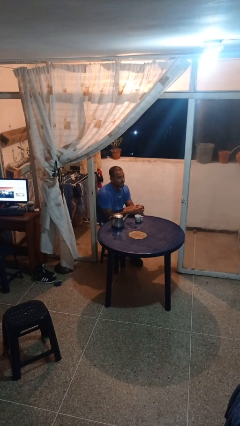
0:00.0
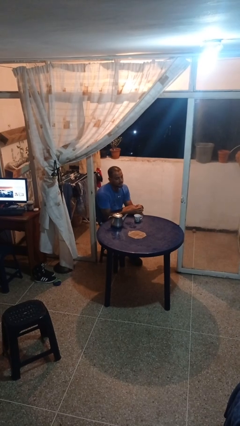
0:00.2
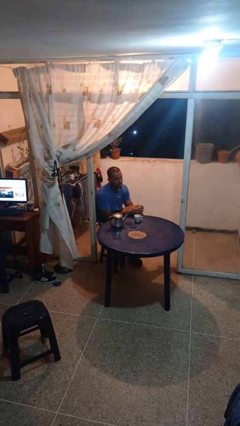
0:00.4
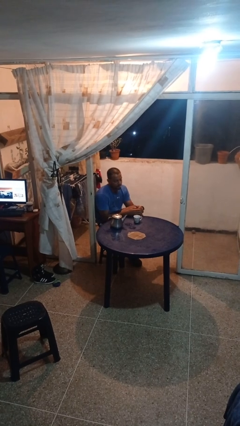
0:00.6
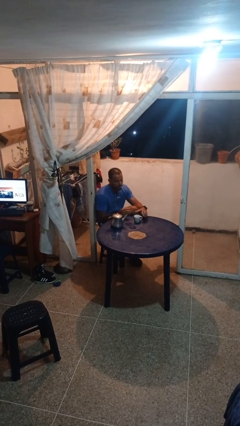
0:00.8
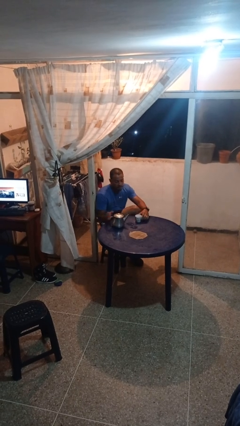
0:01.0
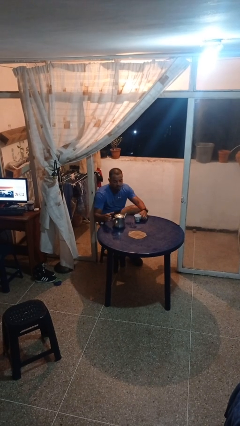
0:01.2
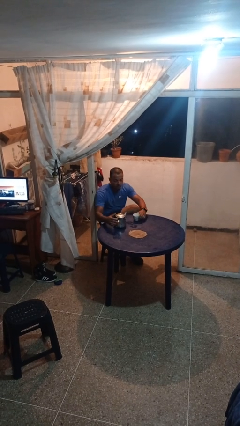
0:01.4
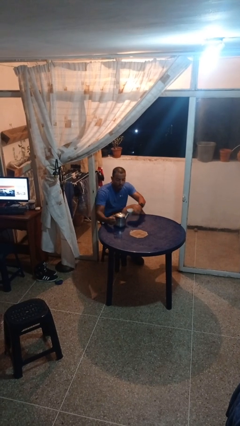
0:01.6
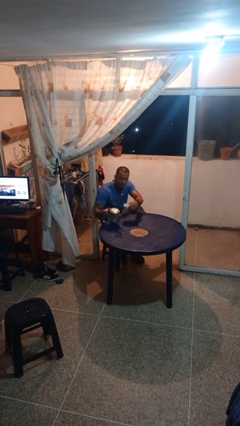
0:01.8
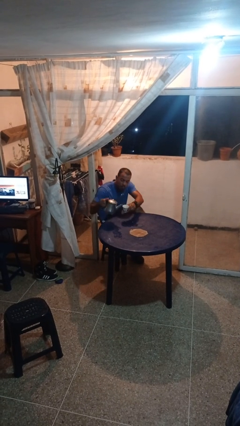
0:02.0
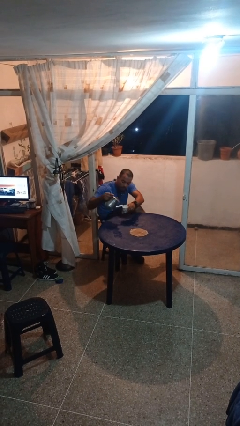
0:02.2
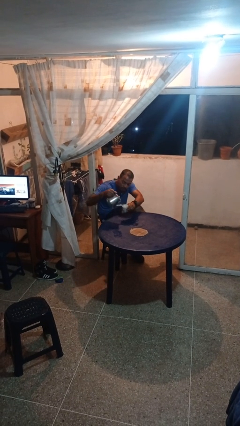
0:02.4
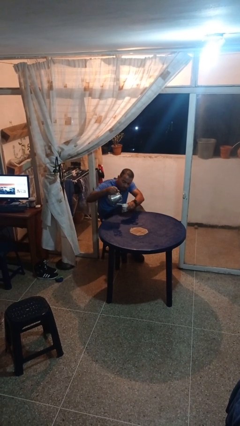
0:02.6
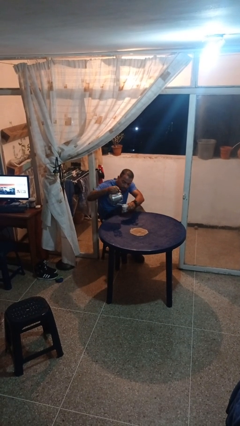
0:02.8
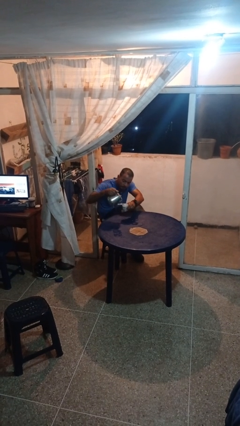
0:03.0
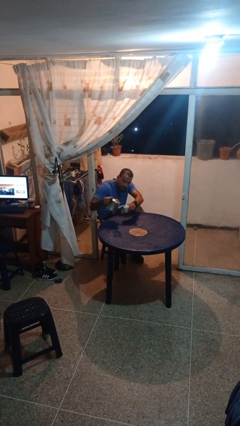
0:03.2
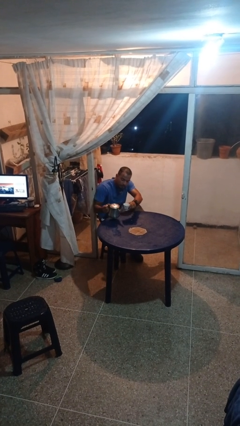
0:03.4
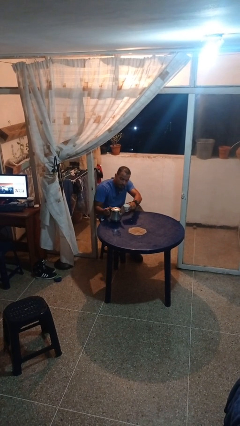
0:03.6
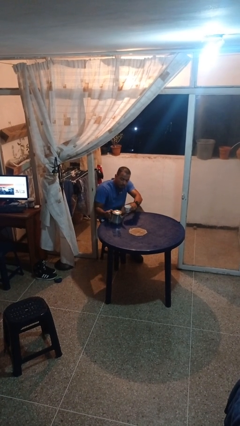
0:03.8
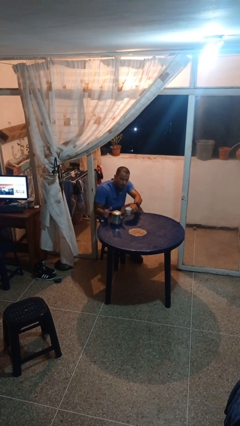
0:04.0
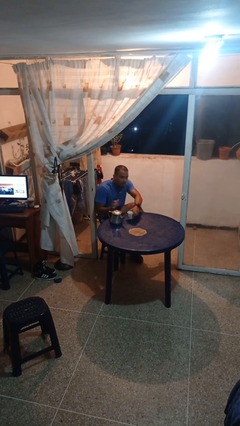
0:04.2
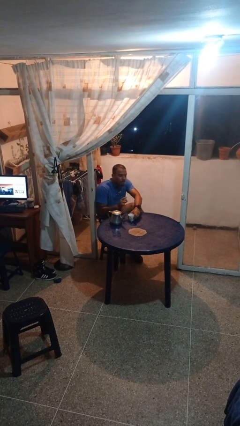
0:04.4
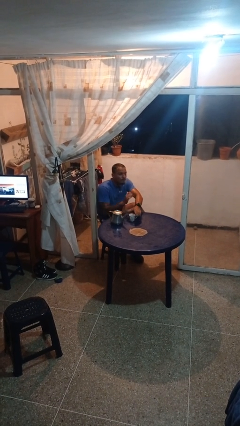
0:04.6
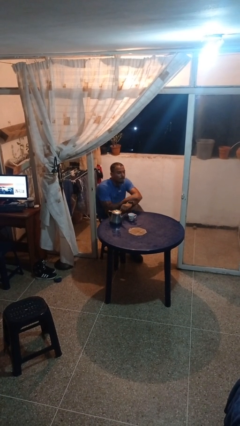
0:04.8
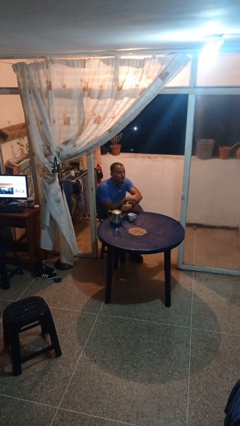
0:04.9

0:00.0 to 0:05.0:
person pours coffee into mug

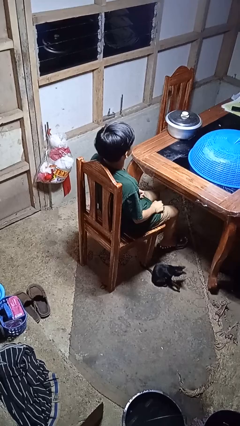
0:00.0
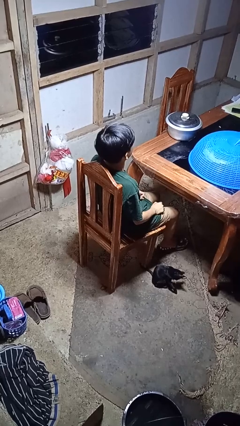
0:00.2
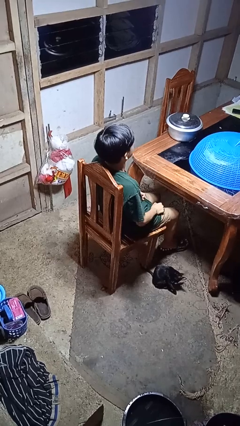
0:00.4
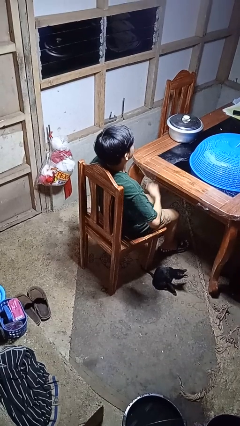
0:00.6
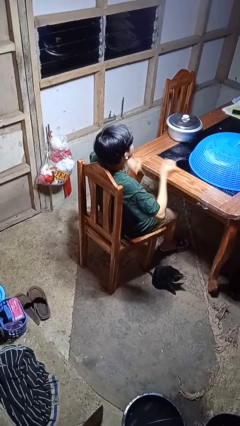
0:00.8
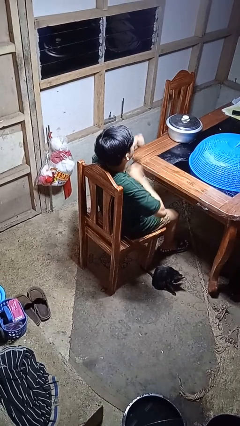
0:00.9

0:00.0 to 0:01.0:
person drums on chest

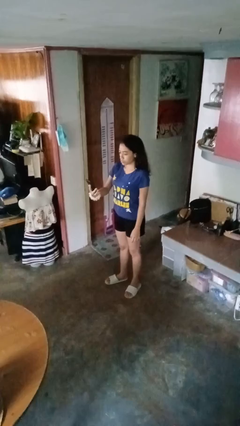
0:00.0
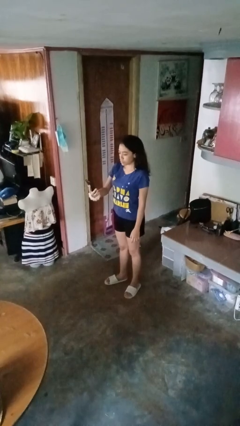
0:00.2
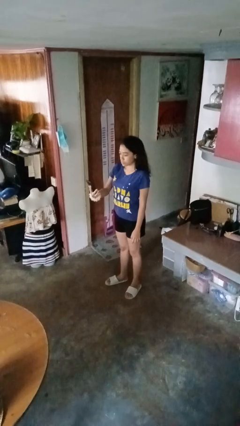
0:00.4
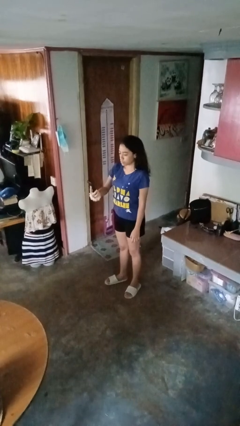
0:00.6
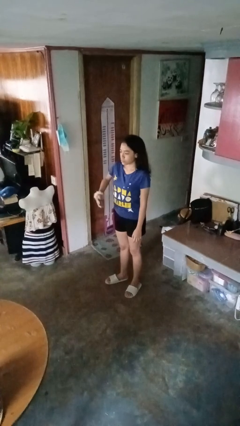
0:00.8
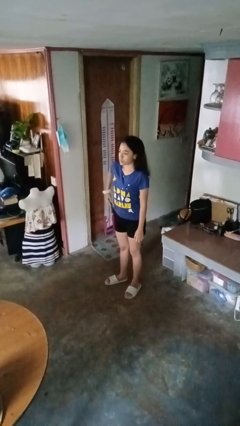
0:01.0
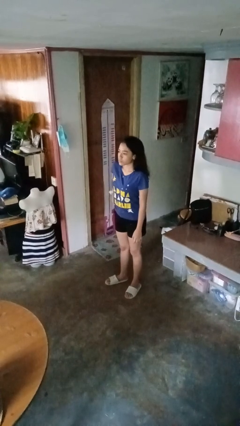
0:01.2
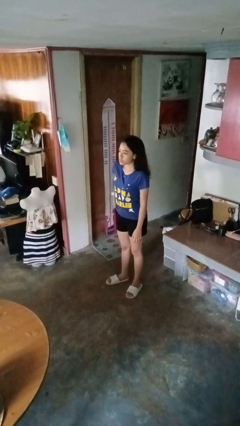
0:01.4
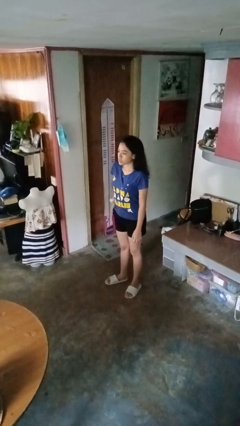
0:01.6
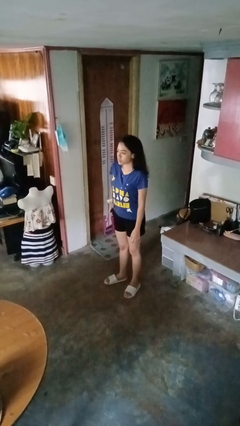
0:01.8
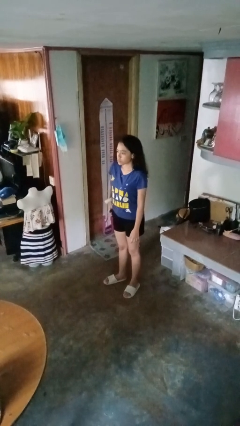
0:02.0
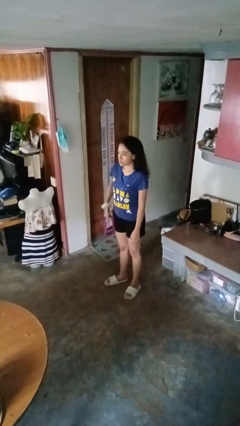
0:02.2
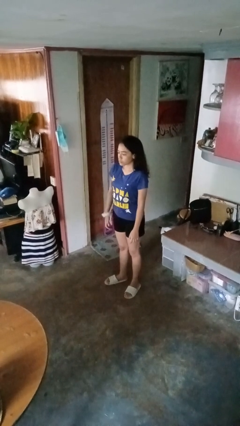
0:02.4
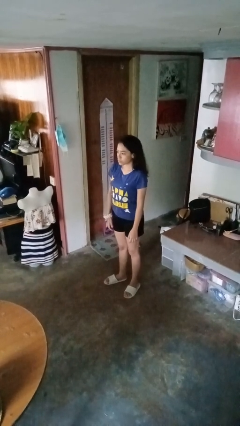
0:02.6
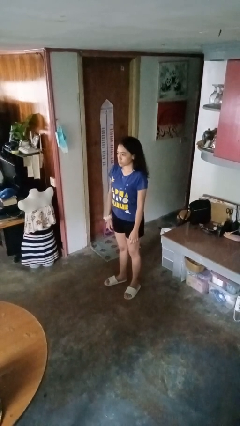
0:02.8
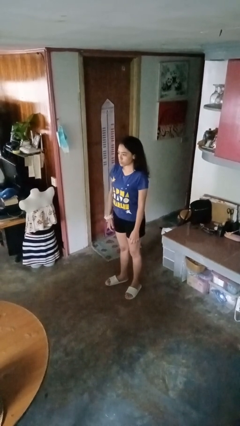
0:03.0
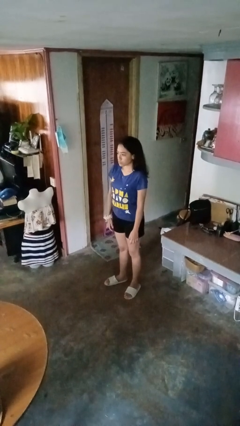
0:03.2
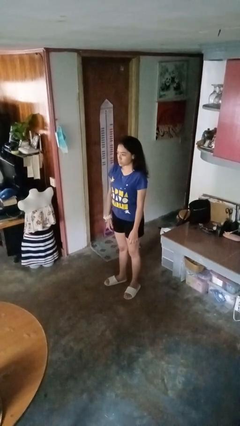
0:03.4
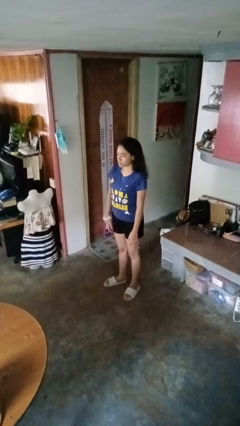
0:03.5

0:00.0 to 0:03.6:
person puts phone into pocket

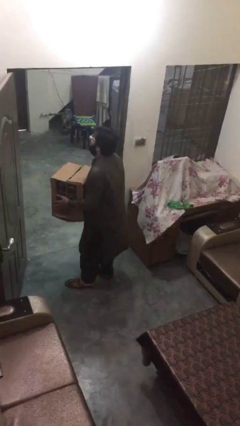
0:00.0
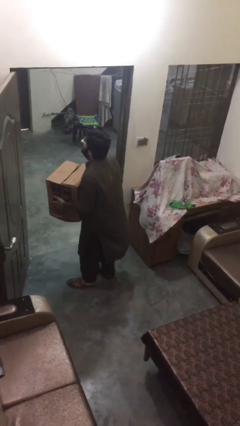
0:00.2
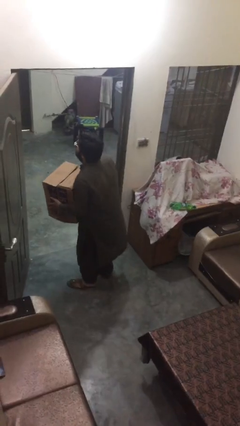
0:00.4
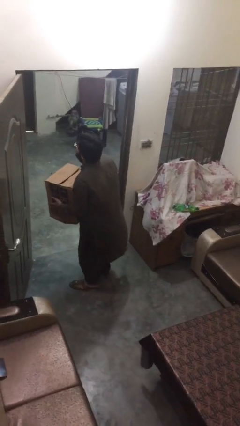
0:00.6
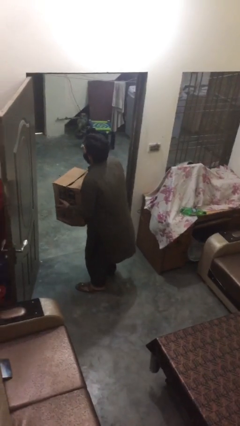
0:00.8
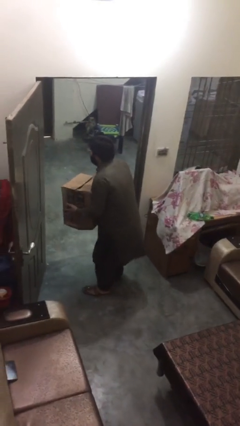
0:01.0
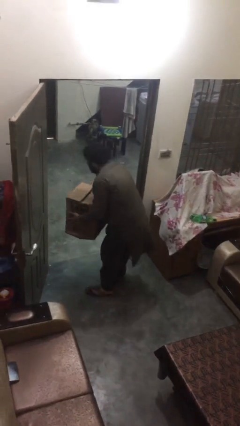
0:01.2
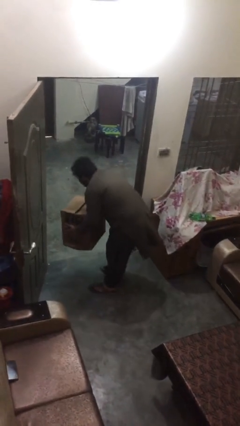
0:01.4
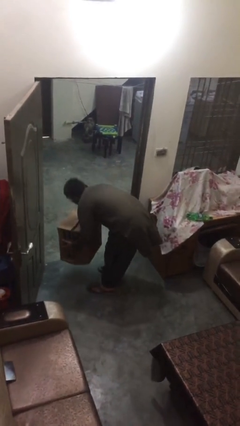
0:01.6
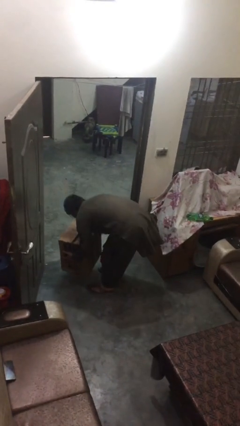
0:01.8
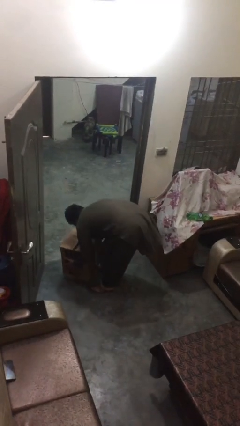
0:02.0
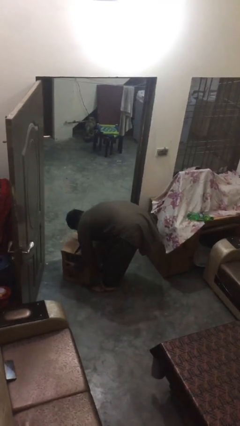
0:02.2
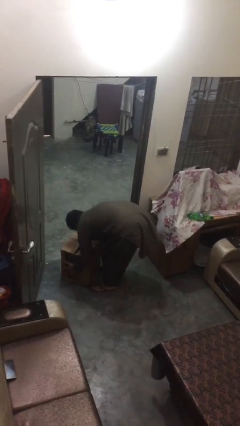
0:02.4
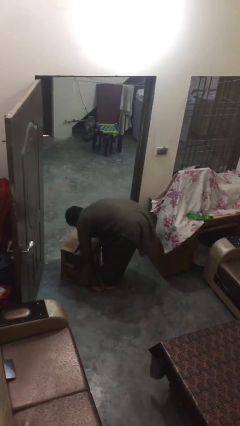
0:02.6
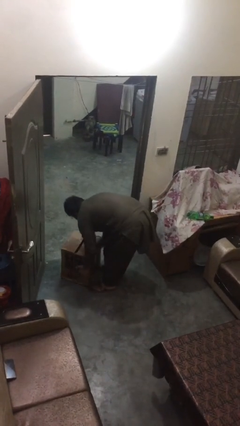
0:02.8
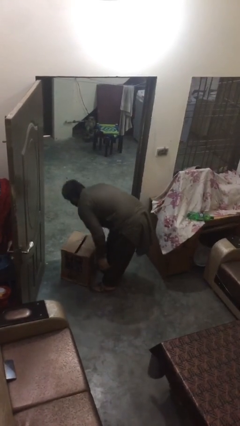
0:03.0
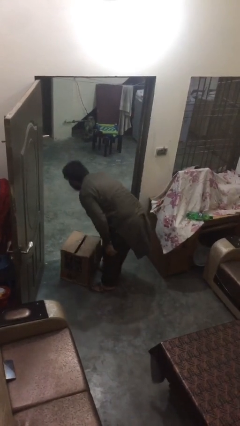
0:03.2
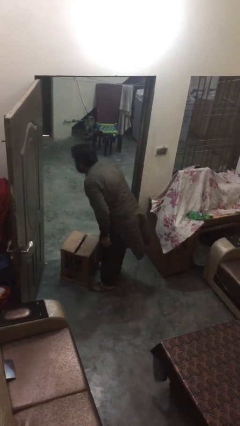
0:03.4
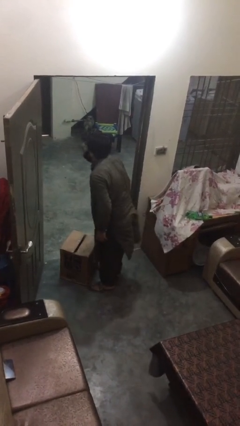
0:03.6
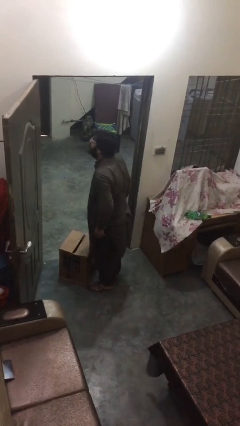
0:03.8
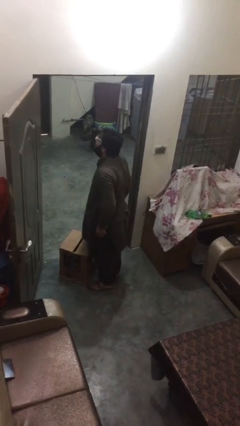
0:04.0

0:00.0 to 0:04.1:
person puts down object on floor

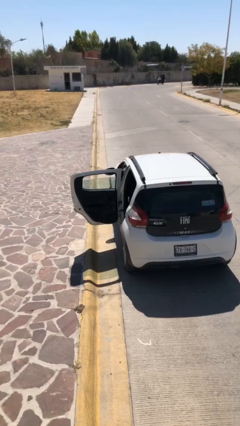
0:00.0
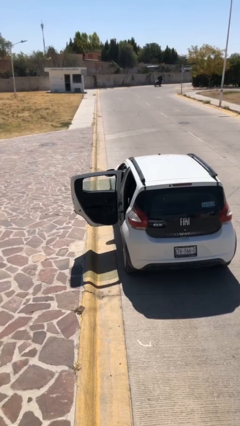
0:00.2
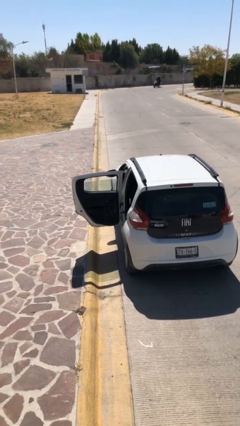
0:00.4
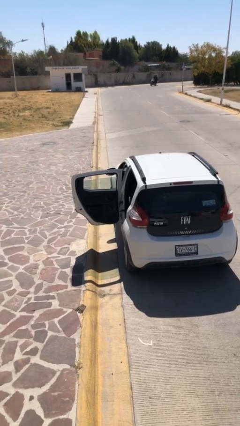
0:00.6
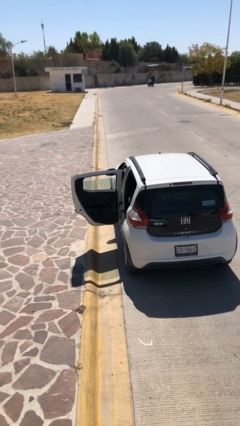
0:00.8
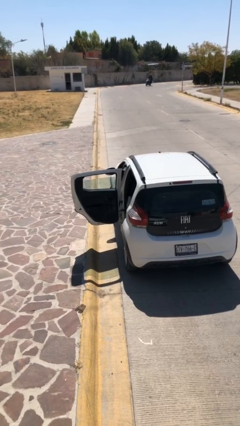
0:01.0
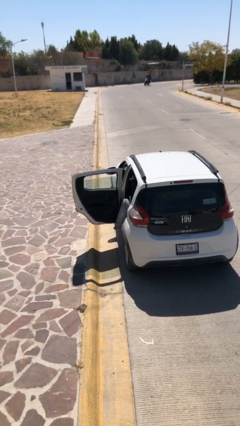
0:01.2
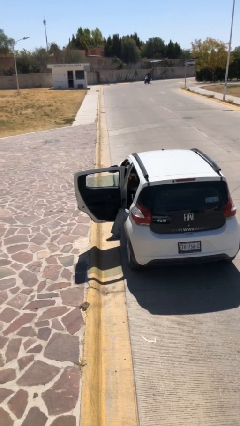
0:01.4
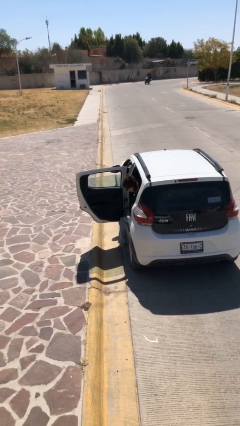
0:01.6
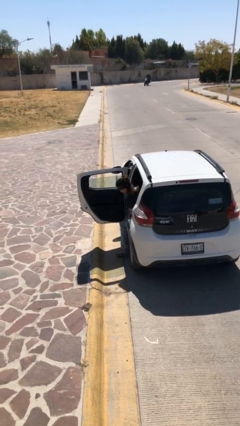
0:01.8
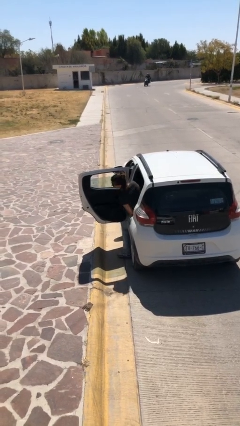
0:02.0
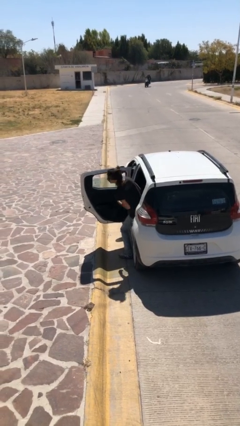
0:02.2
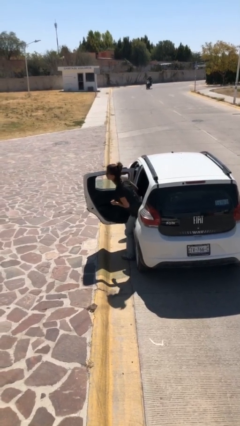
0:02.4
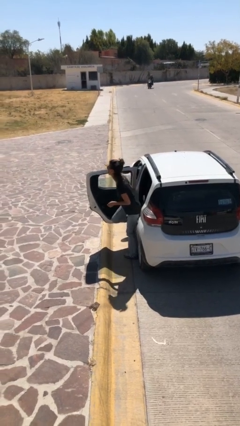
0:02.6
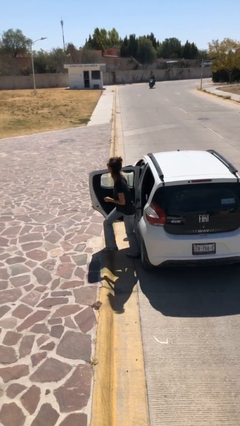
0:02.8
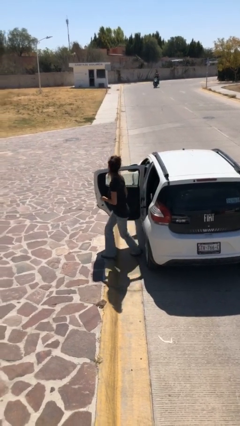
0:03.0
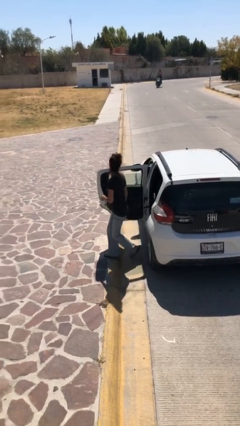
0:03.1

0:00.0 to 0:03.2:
person exits car

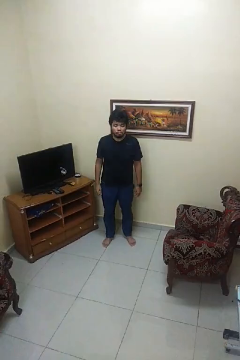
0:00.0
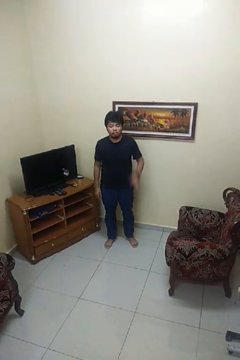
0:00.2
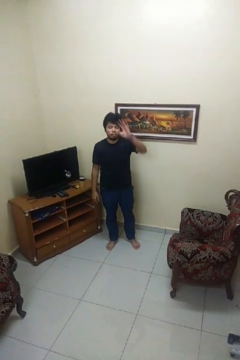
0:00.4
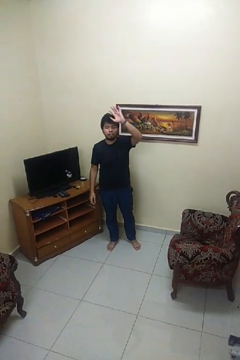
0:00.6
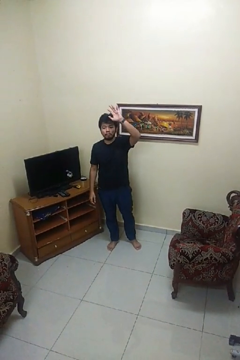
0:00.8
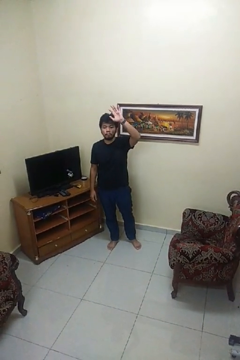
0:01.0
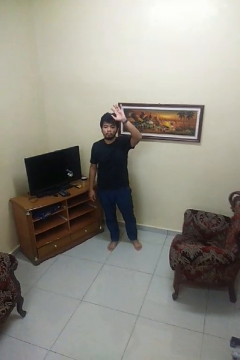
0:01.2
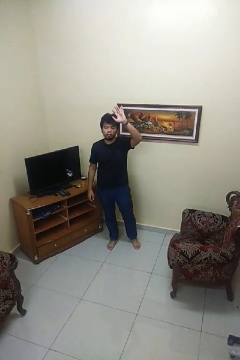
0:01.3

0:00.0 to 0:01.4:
person gestures raise hand
